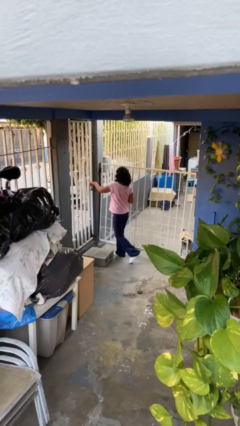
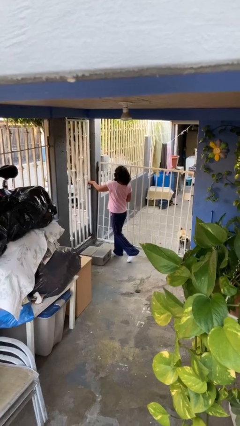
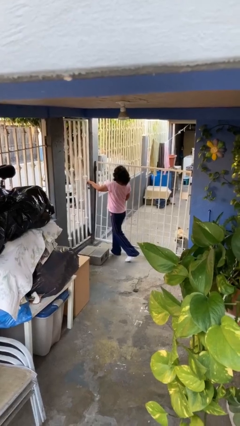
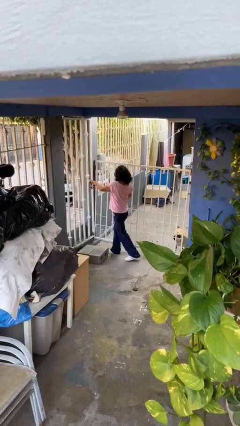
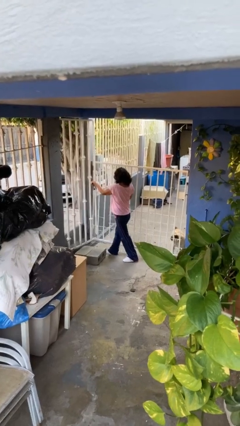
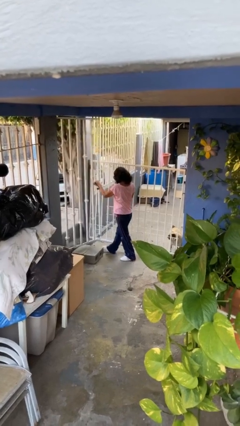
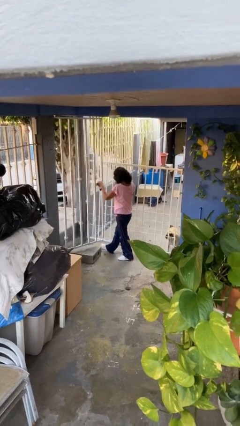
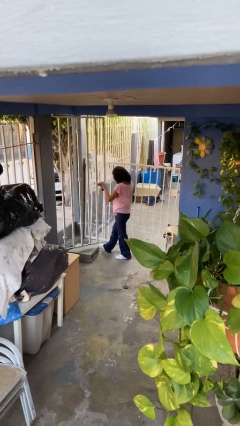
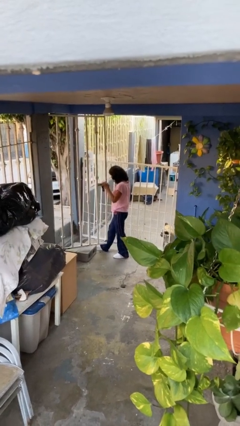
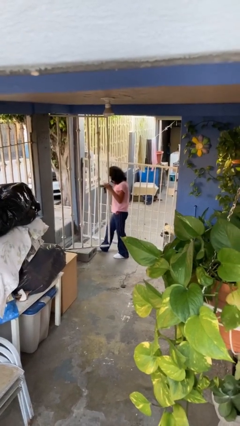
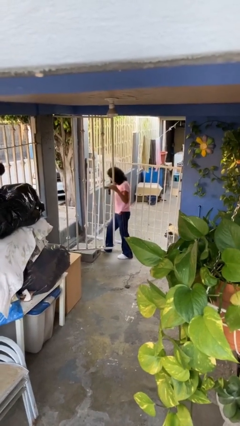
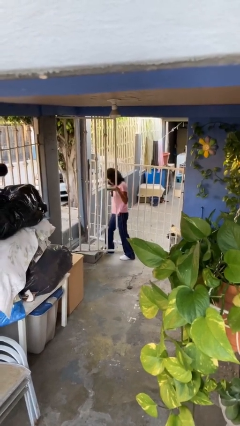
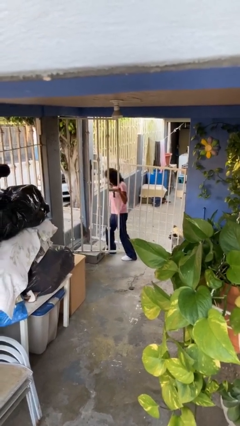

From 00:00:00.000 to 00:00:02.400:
person opens facility door

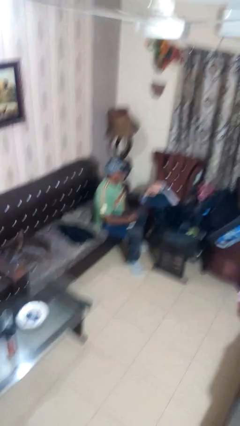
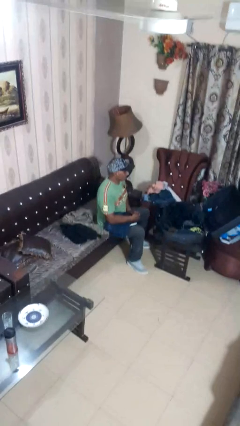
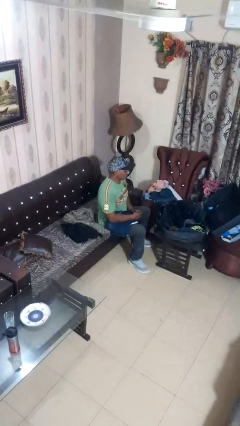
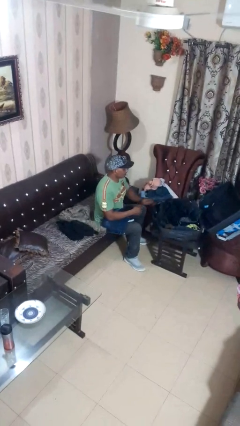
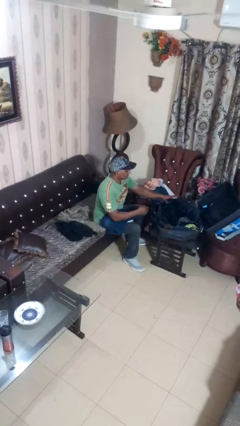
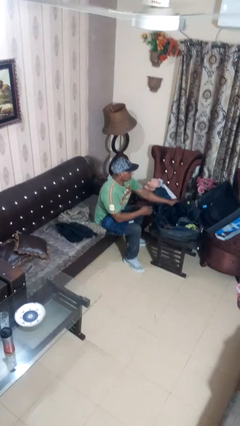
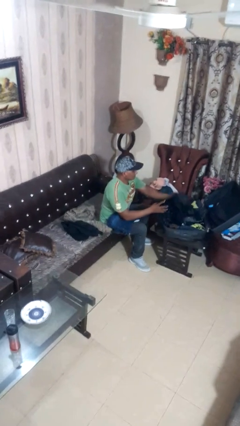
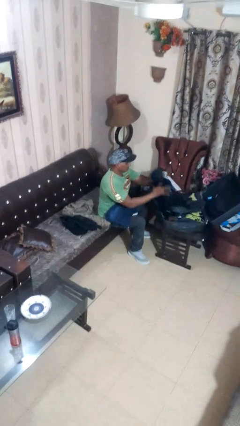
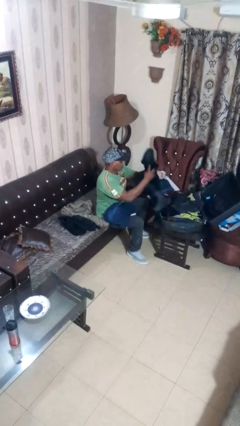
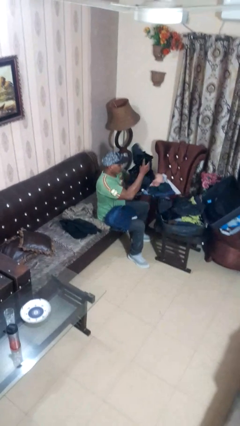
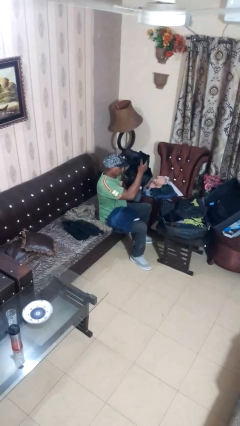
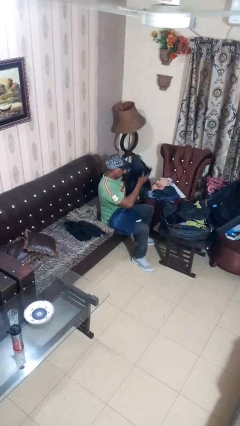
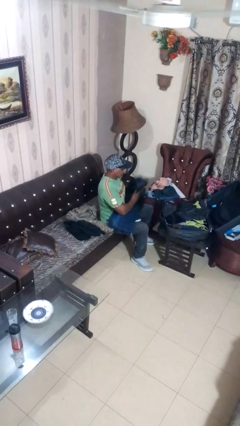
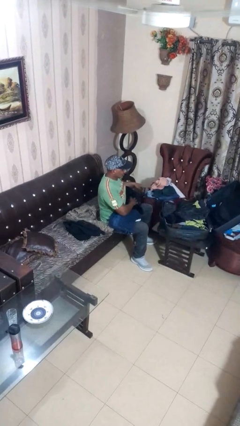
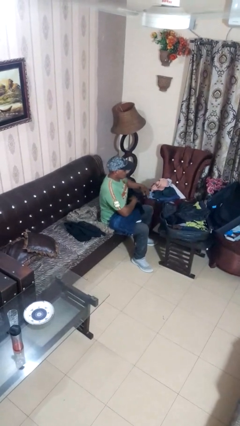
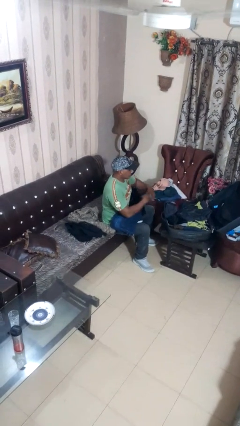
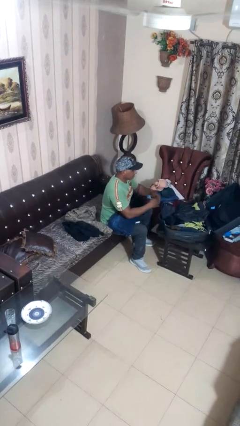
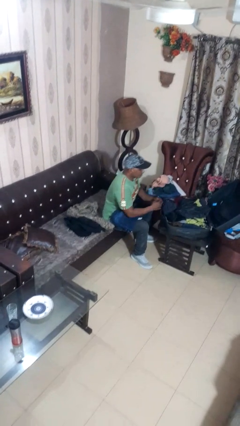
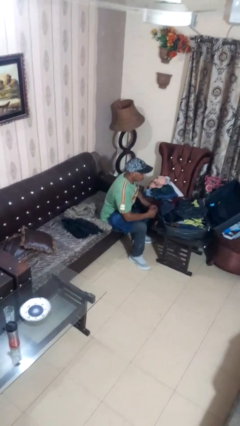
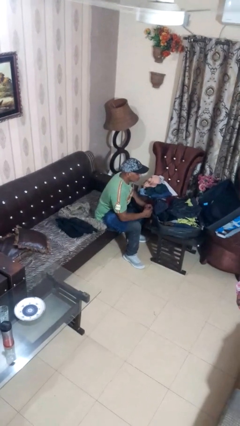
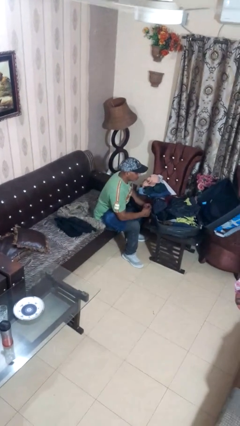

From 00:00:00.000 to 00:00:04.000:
person unloads clothes from suitcase

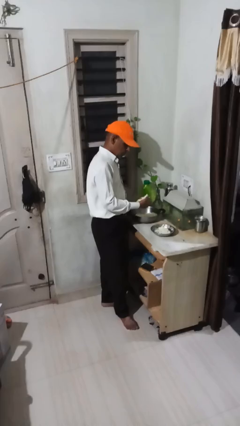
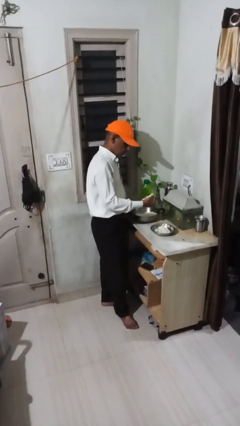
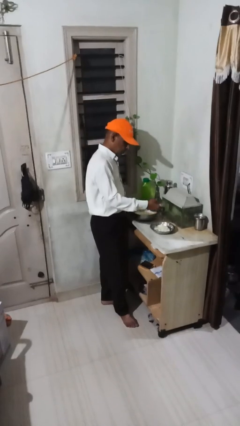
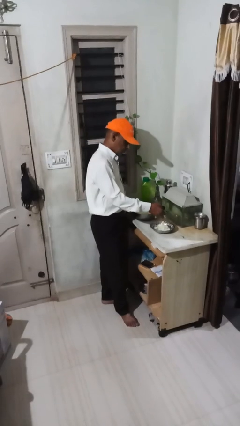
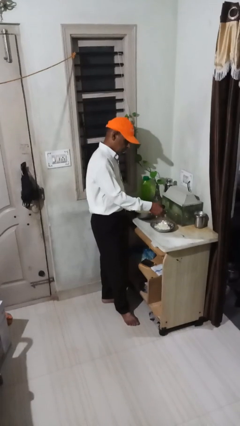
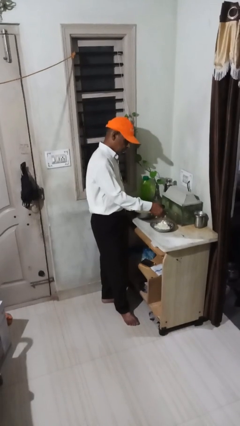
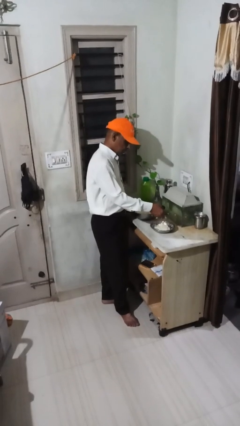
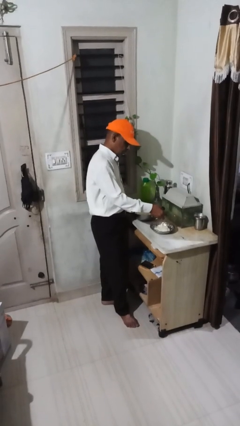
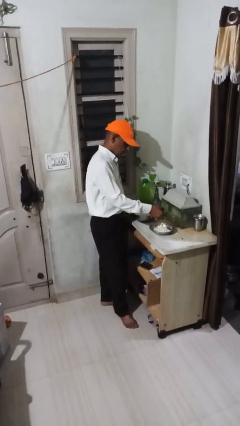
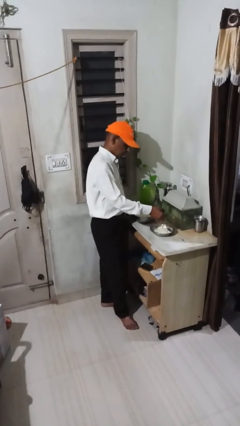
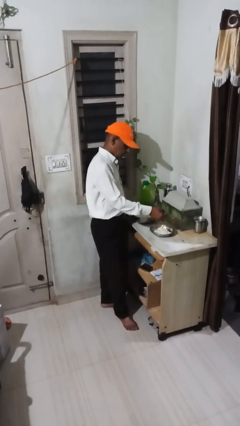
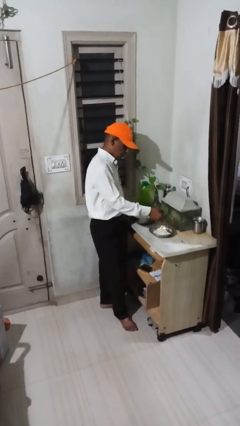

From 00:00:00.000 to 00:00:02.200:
person pours into bowl

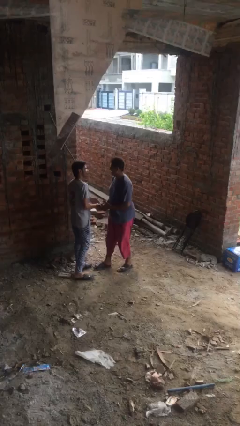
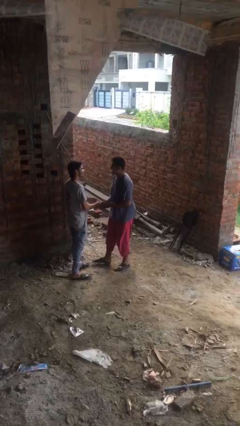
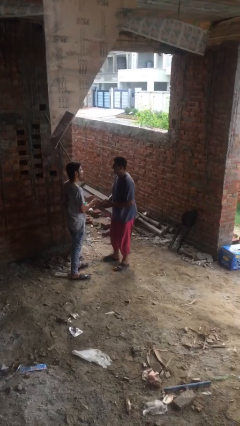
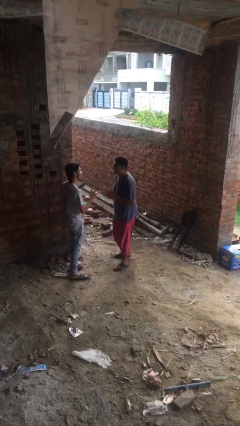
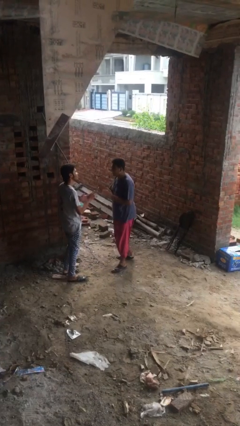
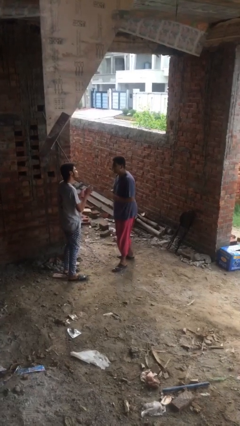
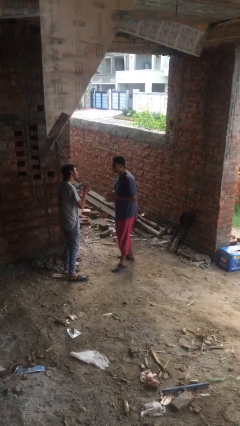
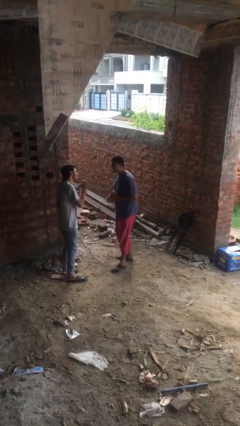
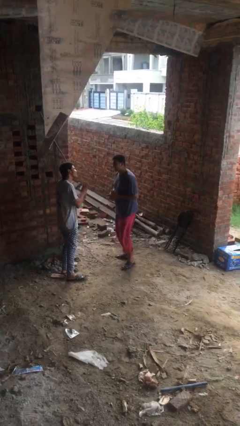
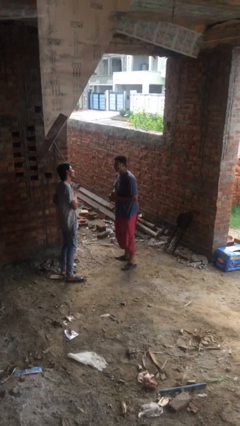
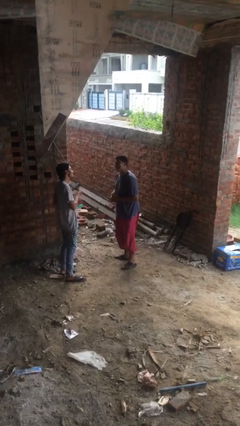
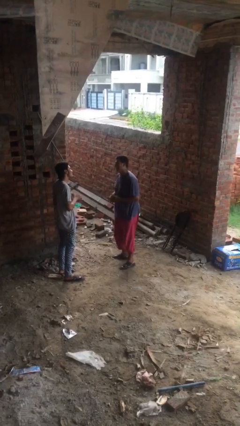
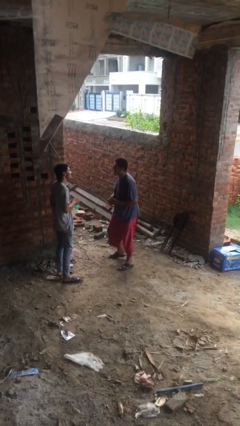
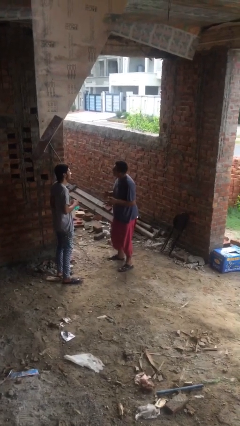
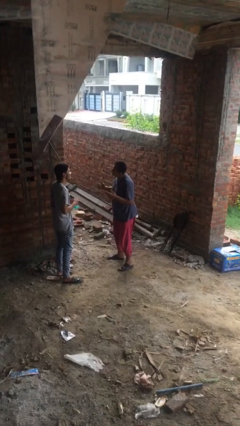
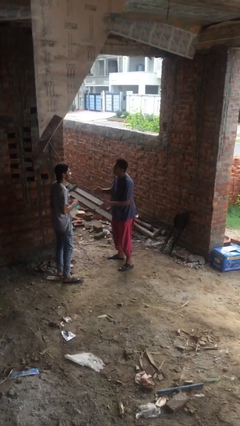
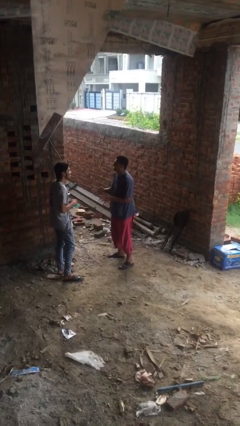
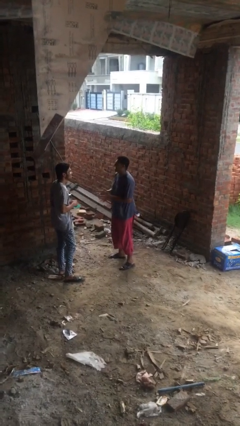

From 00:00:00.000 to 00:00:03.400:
person talks to person

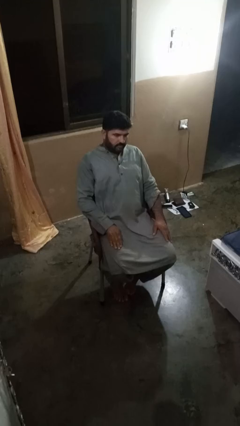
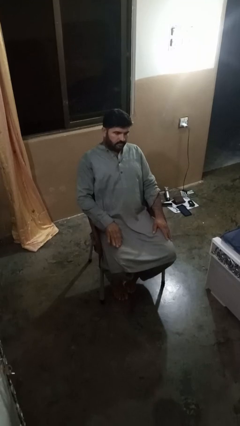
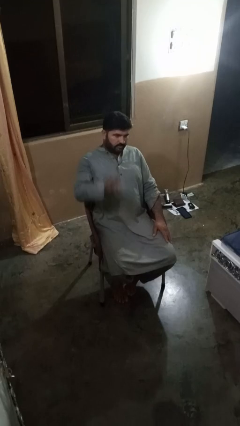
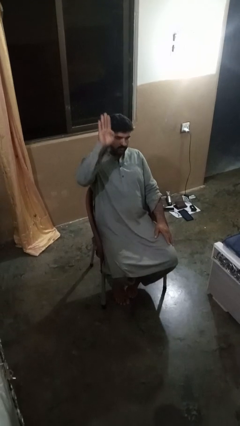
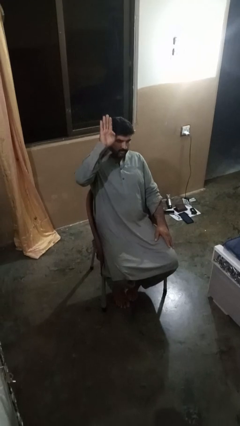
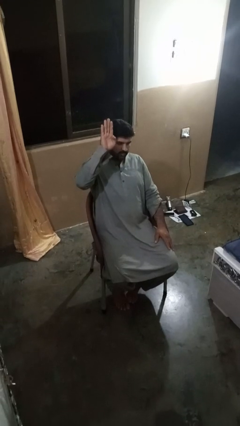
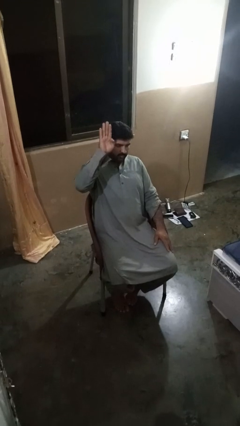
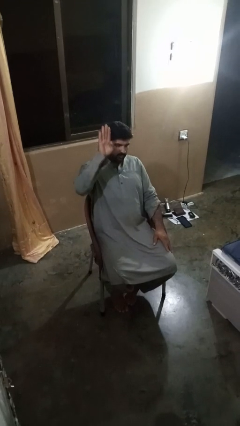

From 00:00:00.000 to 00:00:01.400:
person gestures number four

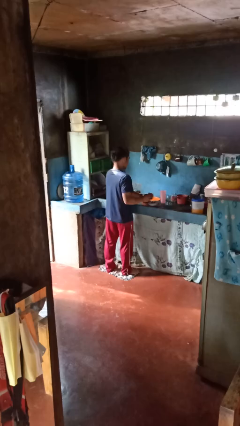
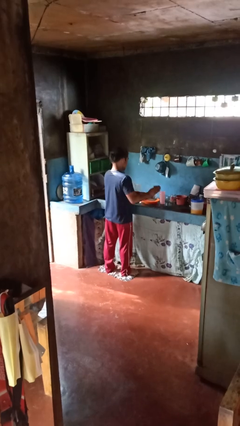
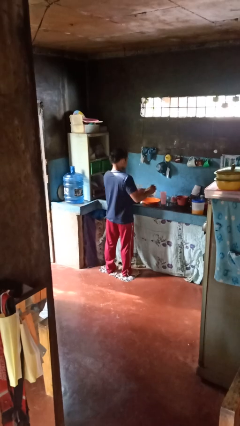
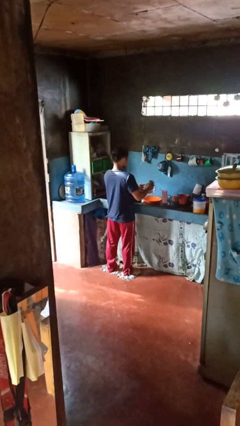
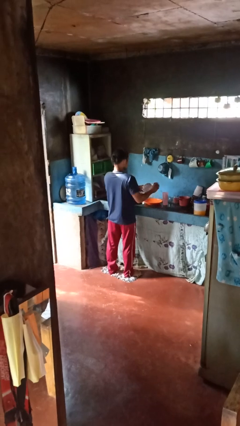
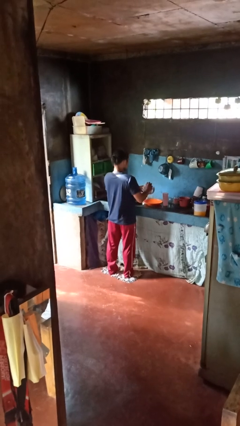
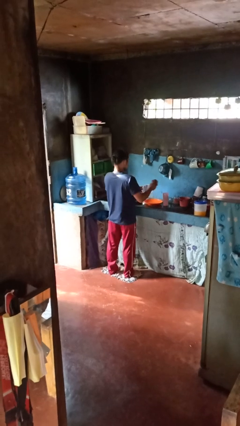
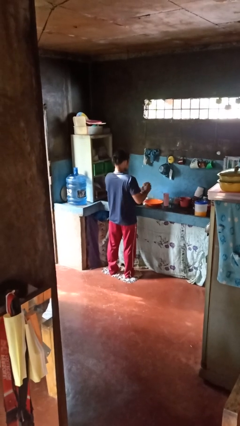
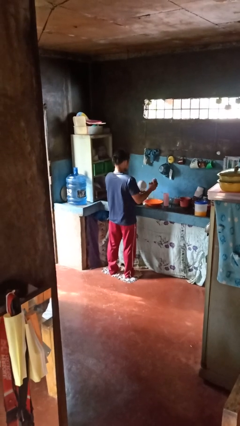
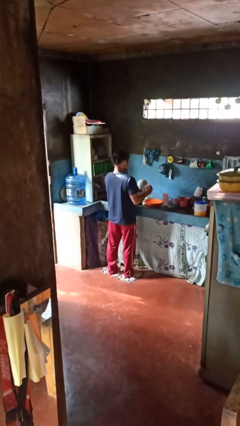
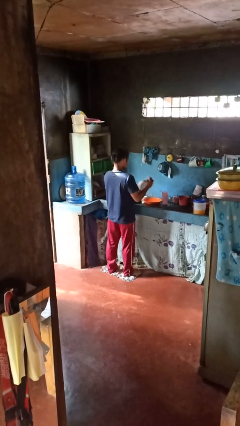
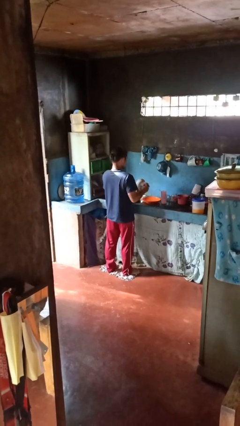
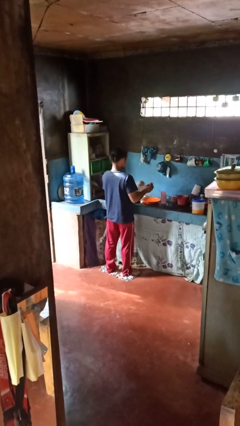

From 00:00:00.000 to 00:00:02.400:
person dries dish

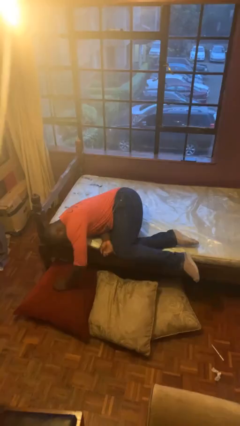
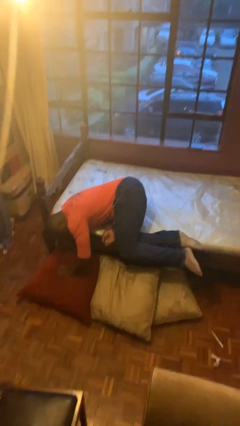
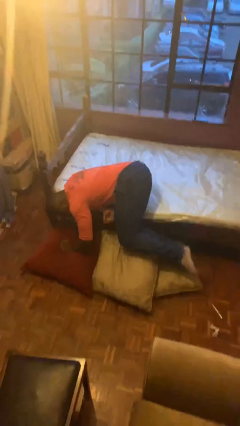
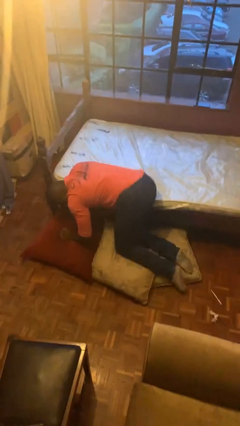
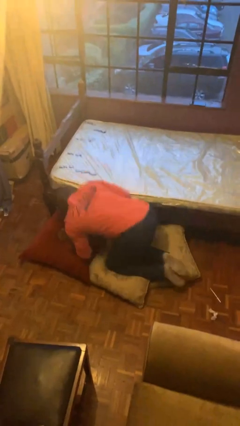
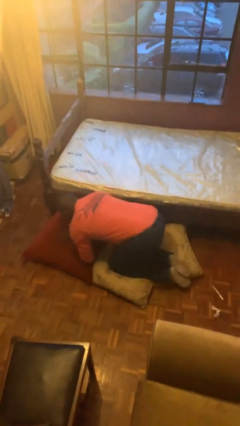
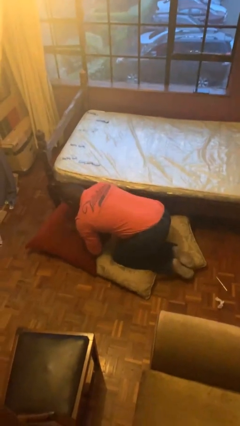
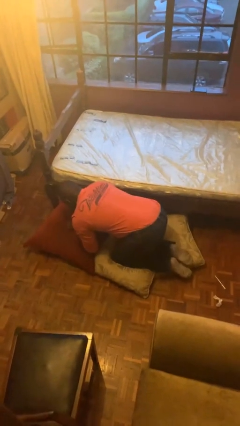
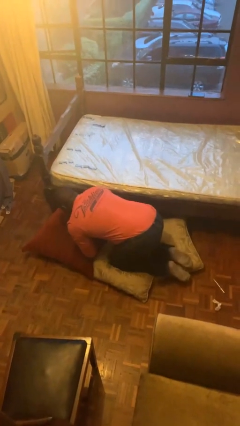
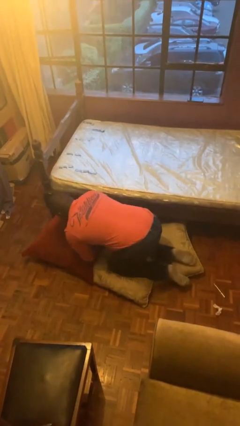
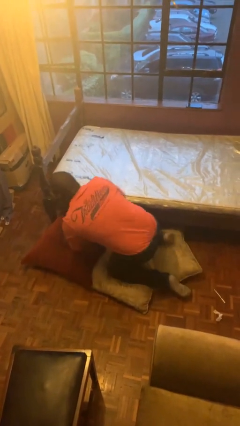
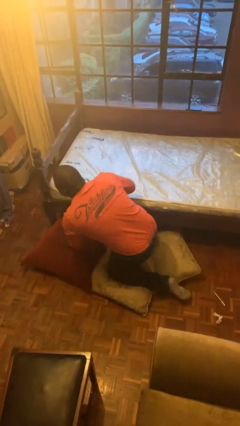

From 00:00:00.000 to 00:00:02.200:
person falls from bed
